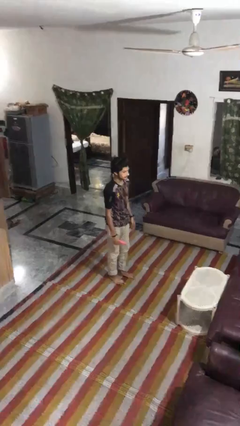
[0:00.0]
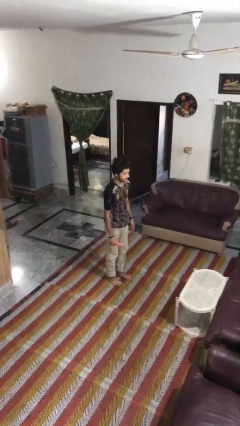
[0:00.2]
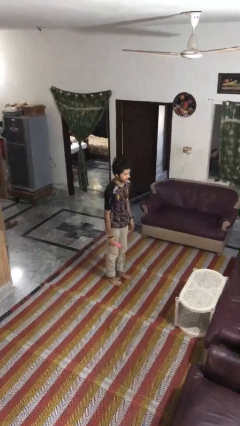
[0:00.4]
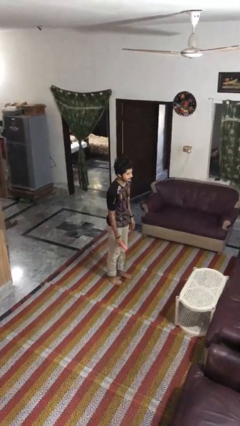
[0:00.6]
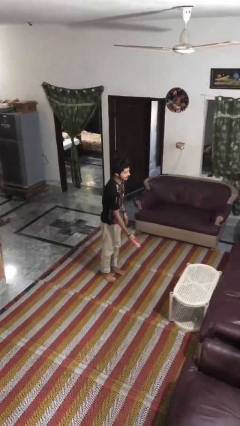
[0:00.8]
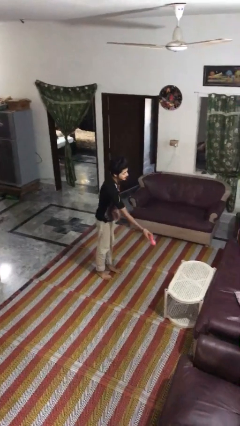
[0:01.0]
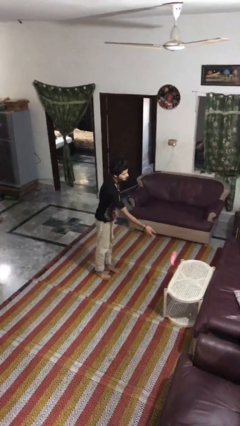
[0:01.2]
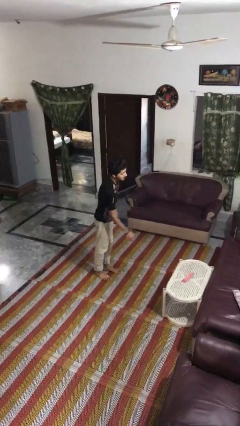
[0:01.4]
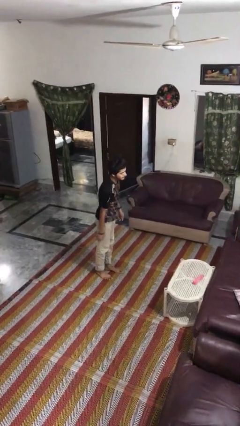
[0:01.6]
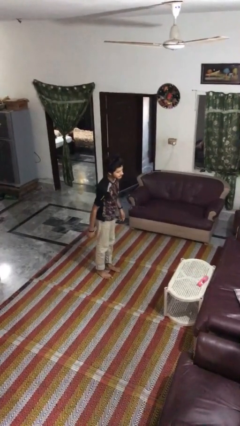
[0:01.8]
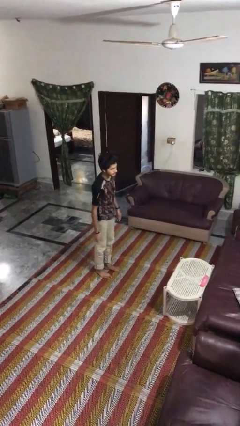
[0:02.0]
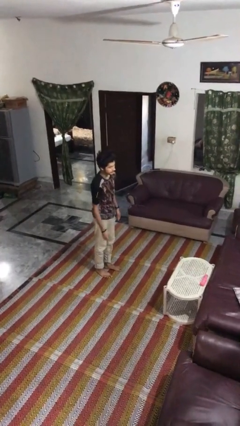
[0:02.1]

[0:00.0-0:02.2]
person throws object on table

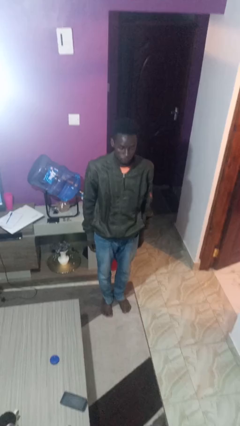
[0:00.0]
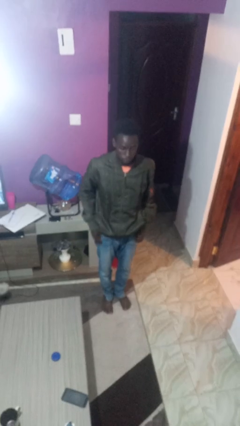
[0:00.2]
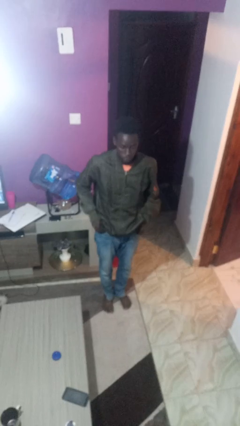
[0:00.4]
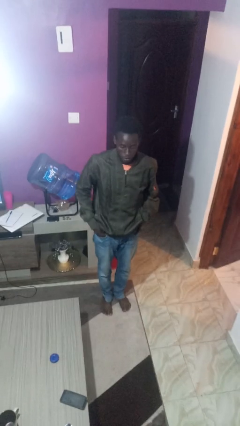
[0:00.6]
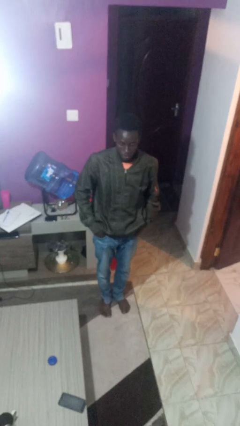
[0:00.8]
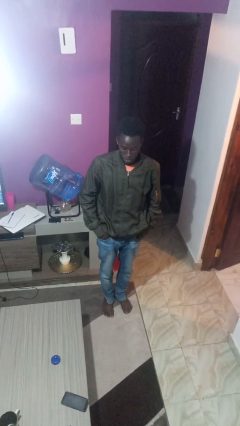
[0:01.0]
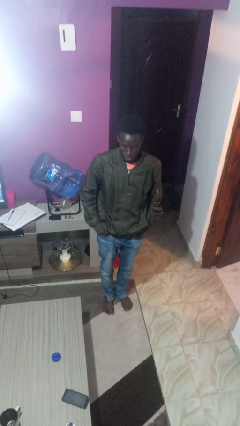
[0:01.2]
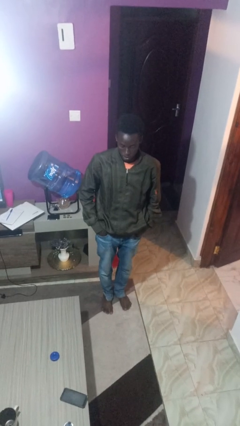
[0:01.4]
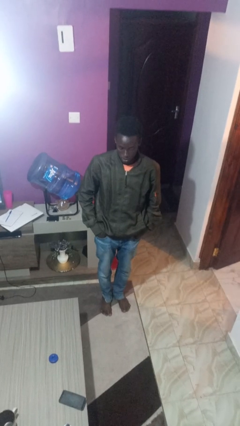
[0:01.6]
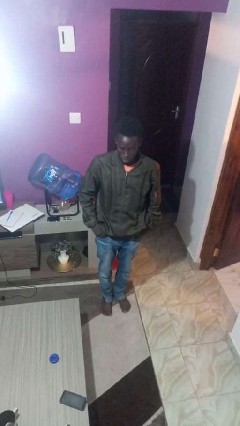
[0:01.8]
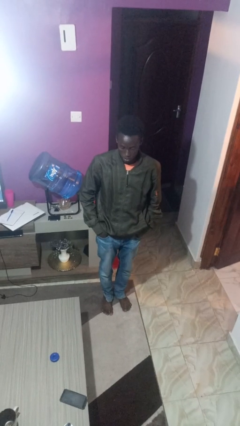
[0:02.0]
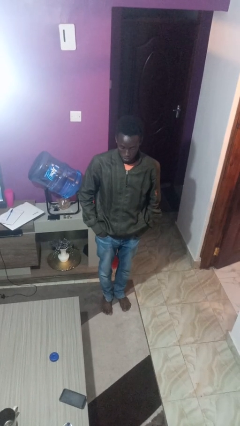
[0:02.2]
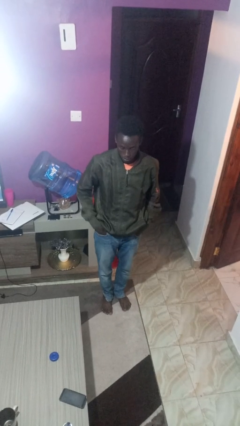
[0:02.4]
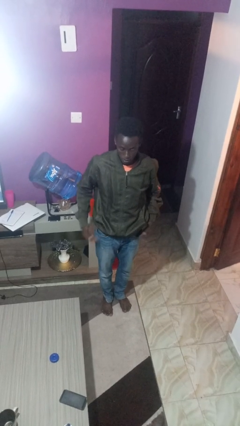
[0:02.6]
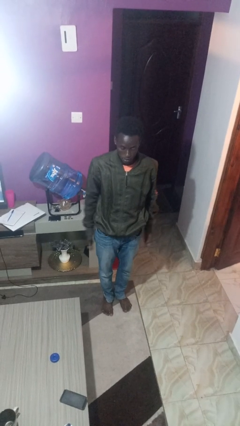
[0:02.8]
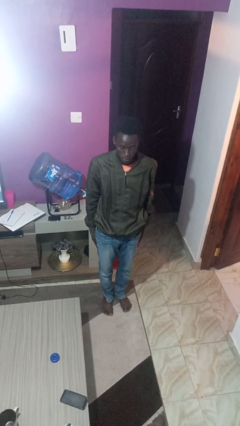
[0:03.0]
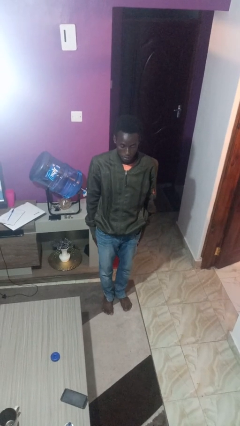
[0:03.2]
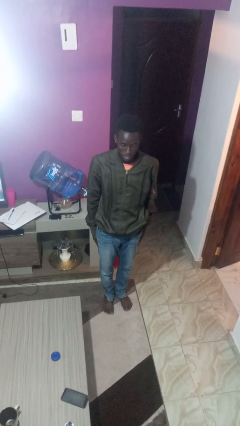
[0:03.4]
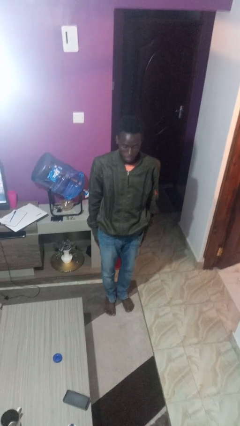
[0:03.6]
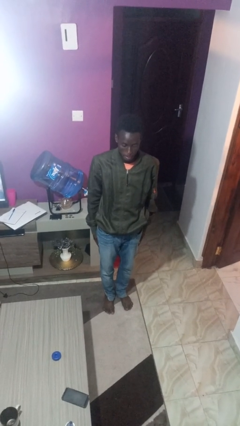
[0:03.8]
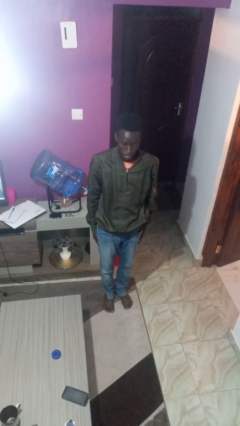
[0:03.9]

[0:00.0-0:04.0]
person puts hands in back pockets

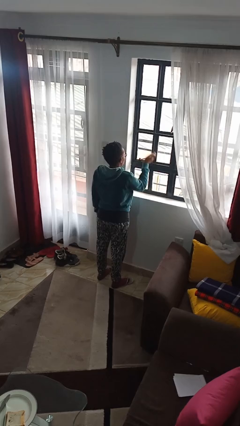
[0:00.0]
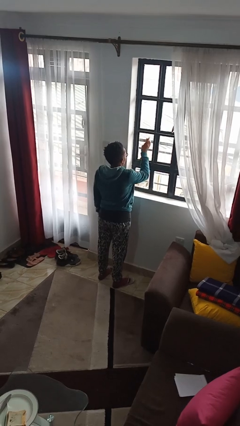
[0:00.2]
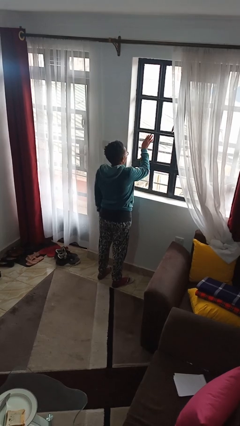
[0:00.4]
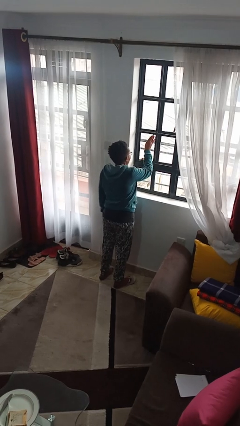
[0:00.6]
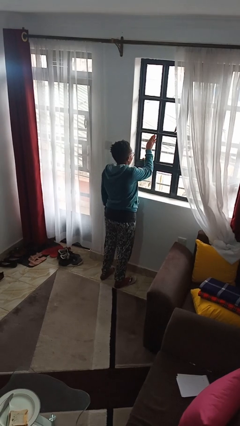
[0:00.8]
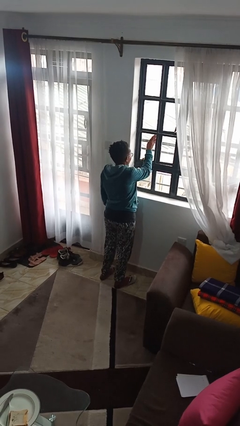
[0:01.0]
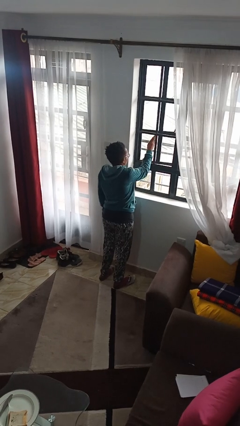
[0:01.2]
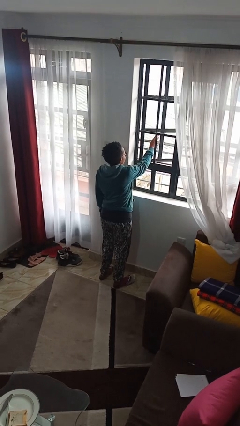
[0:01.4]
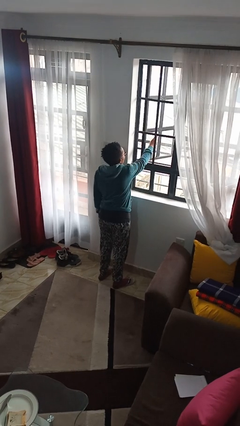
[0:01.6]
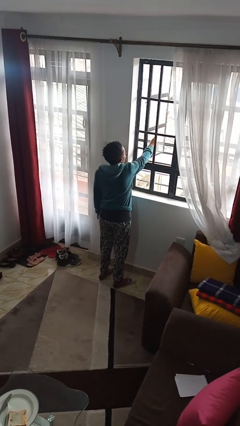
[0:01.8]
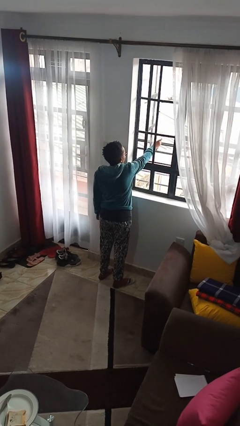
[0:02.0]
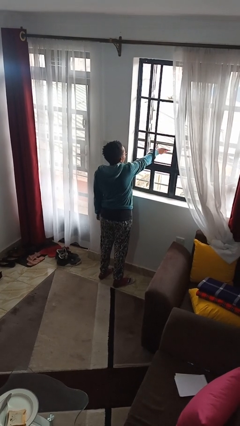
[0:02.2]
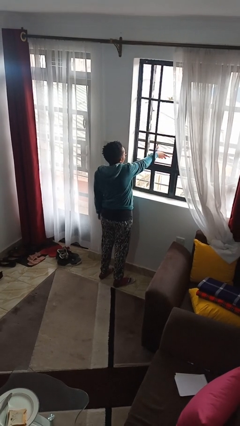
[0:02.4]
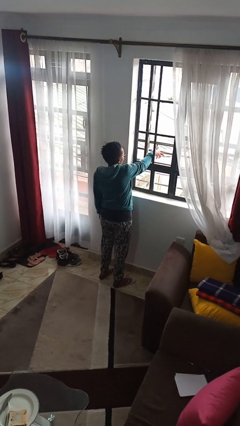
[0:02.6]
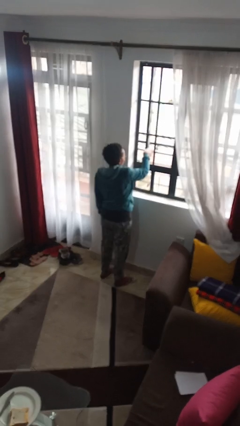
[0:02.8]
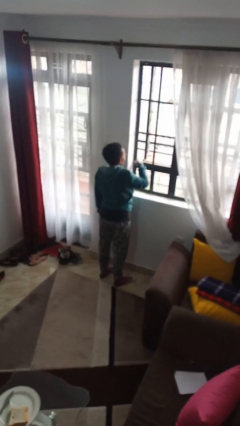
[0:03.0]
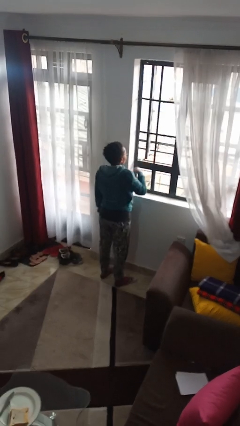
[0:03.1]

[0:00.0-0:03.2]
person opens home window

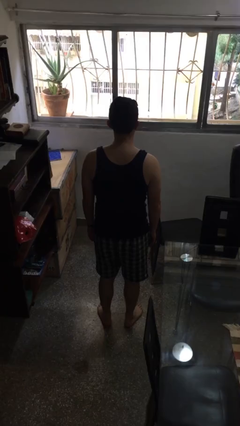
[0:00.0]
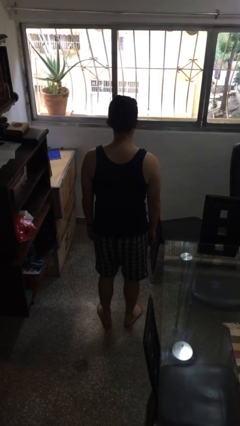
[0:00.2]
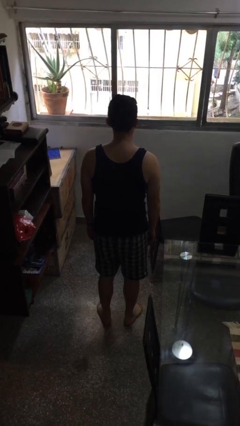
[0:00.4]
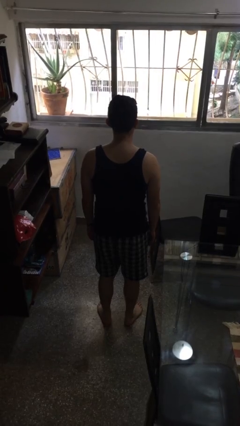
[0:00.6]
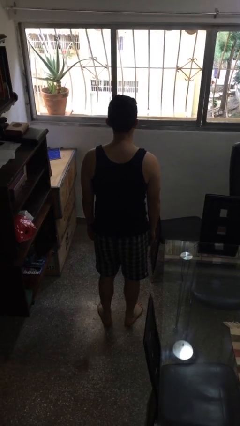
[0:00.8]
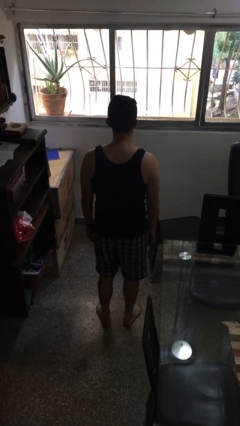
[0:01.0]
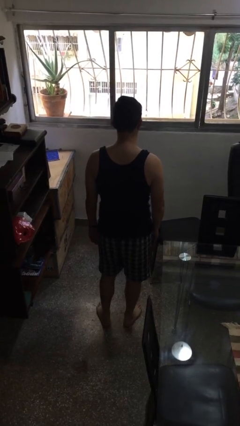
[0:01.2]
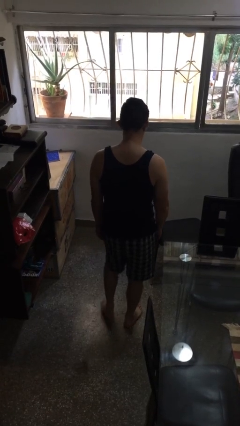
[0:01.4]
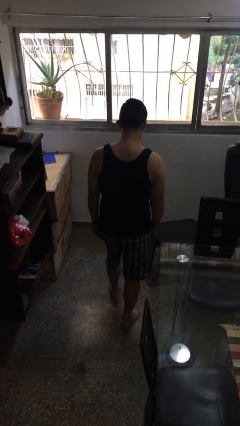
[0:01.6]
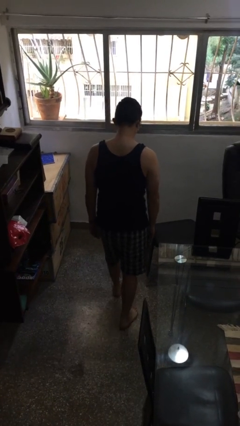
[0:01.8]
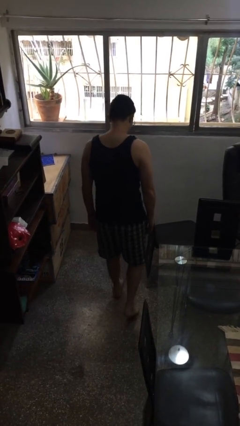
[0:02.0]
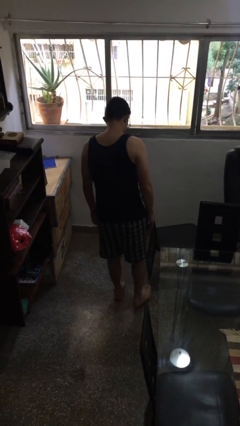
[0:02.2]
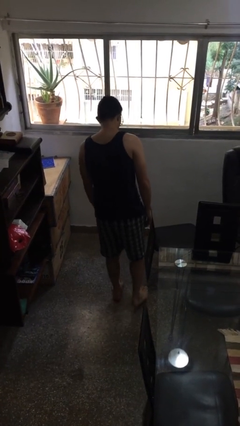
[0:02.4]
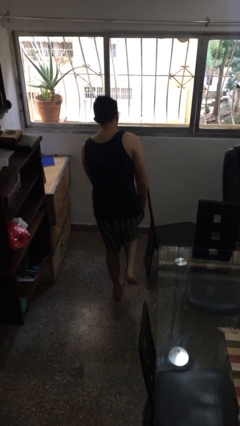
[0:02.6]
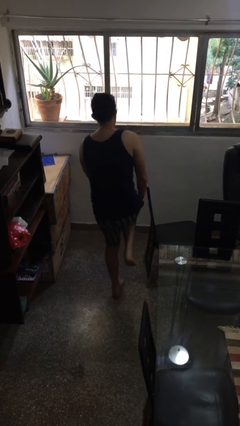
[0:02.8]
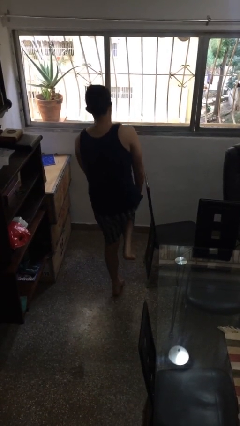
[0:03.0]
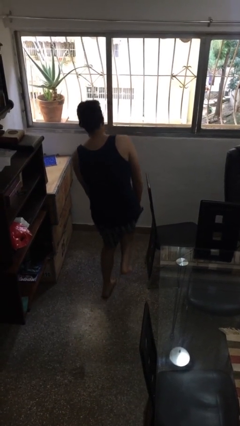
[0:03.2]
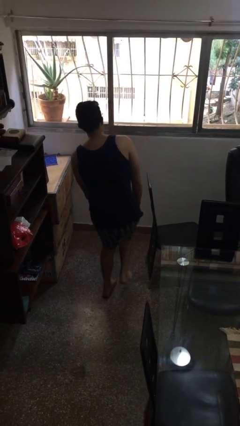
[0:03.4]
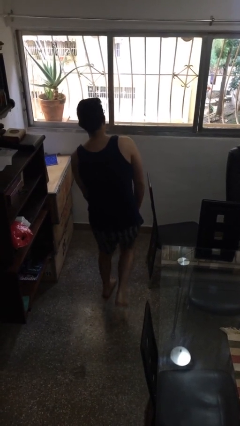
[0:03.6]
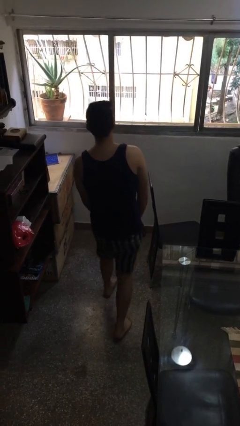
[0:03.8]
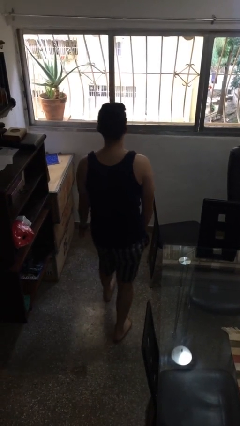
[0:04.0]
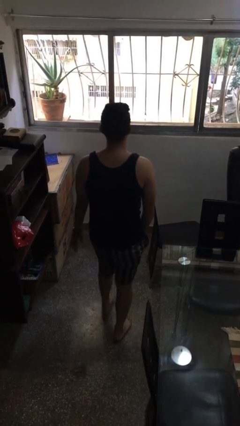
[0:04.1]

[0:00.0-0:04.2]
person stubs toe

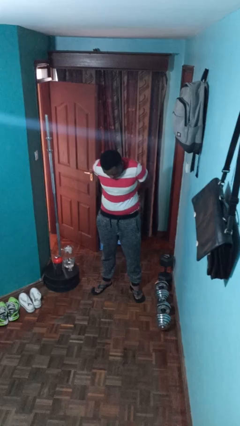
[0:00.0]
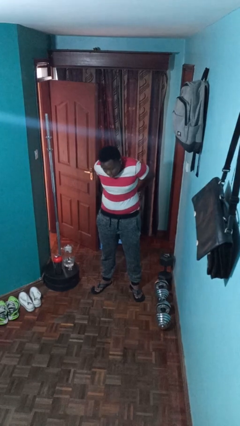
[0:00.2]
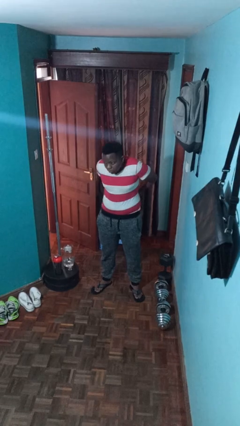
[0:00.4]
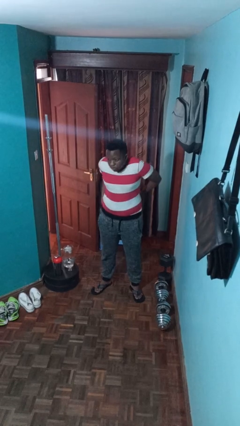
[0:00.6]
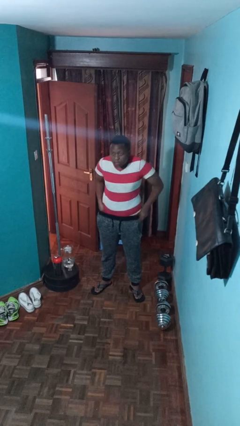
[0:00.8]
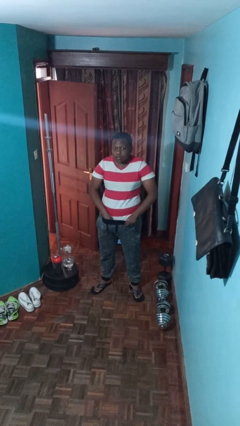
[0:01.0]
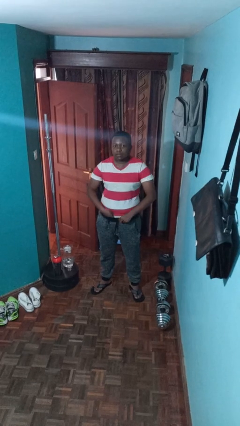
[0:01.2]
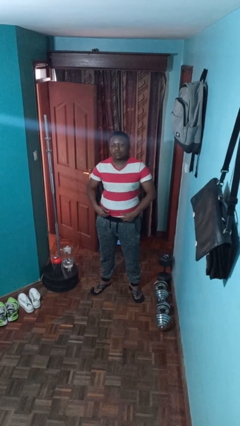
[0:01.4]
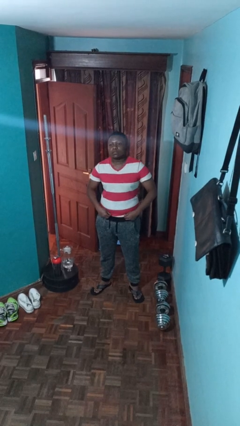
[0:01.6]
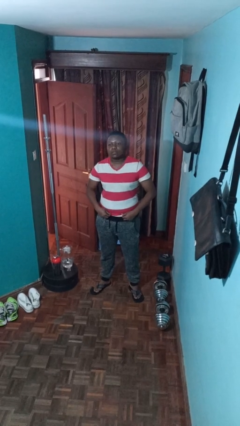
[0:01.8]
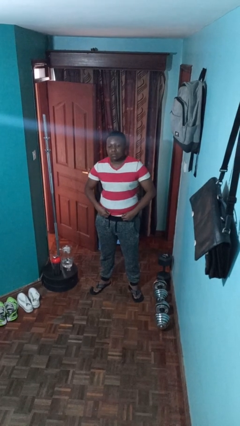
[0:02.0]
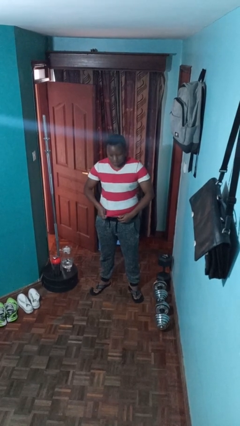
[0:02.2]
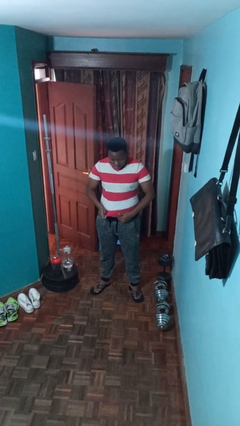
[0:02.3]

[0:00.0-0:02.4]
person tucks in shirt

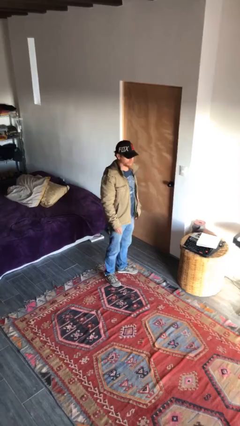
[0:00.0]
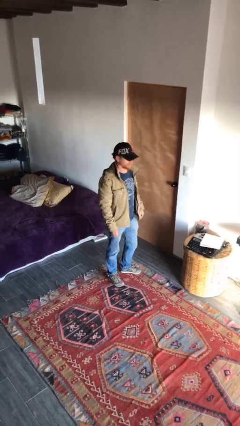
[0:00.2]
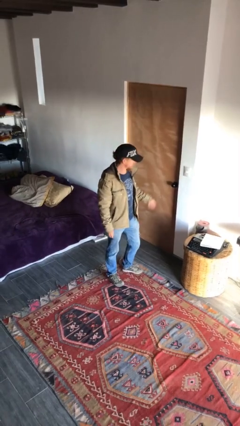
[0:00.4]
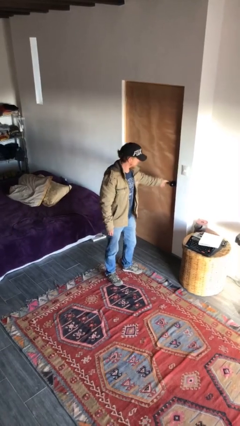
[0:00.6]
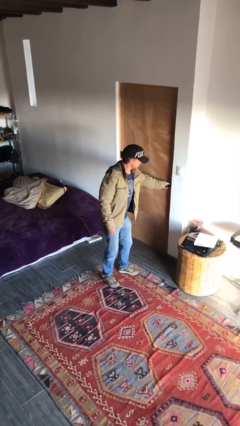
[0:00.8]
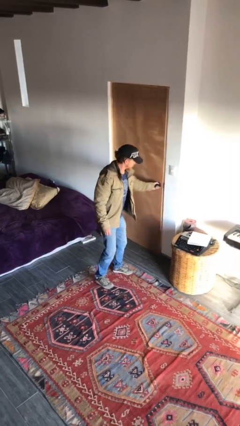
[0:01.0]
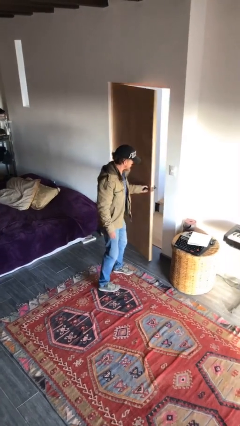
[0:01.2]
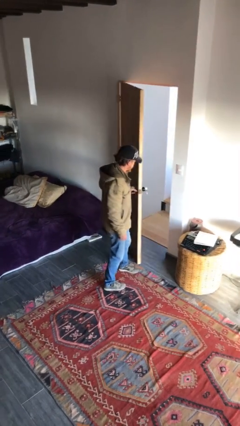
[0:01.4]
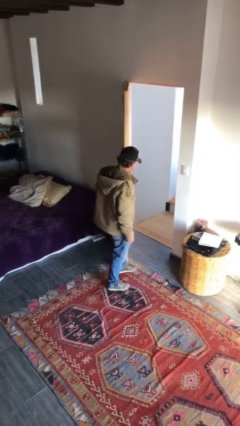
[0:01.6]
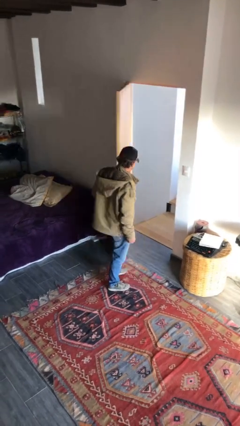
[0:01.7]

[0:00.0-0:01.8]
person opens facility door
